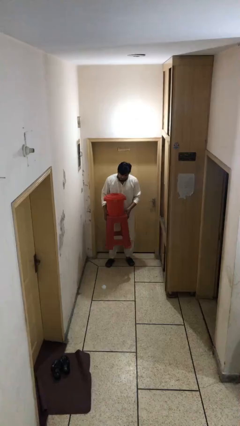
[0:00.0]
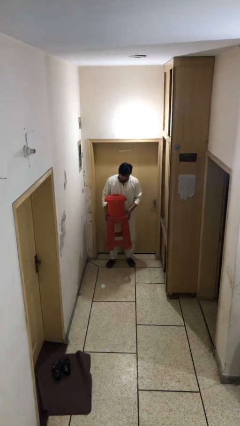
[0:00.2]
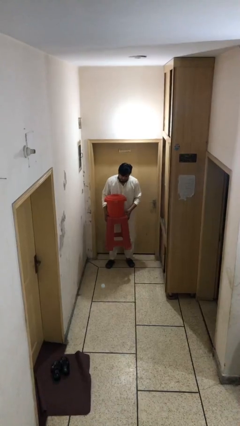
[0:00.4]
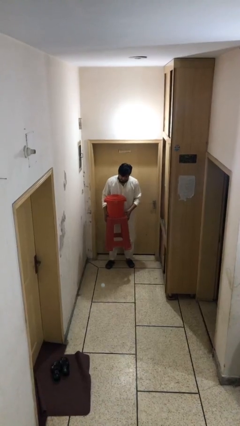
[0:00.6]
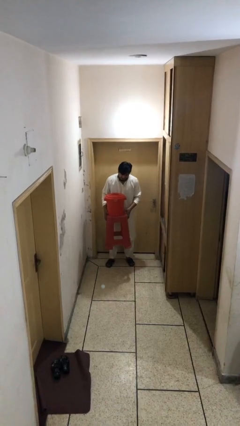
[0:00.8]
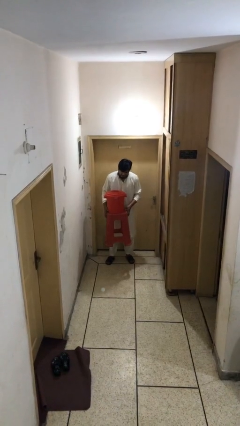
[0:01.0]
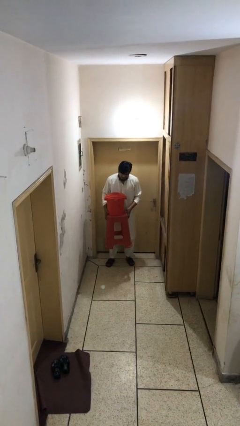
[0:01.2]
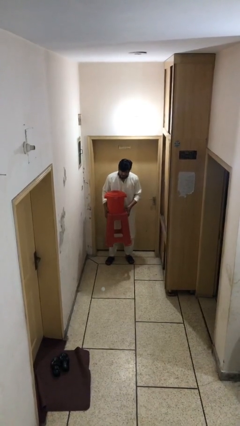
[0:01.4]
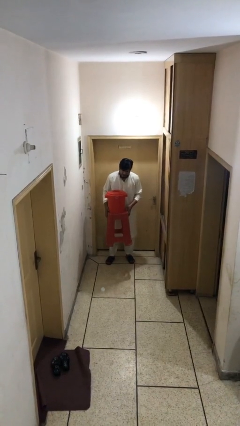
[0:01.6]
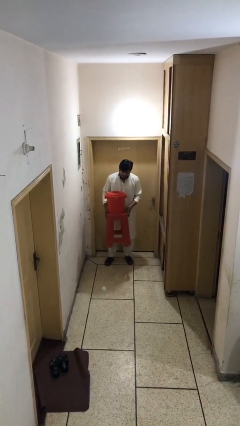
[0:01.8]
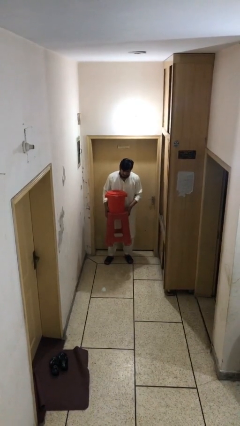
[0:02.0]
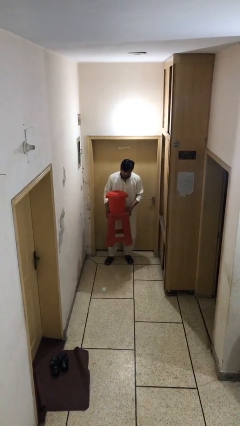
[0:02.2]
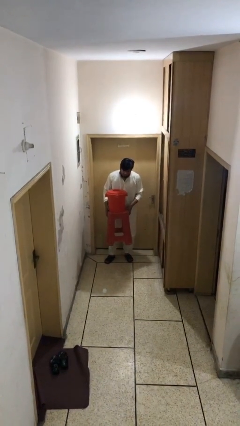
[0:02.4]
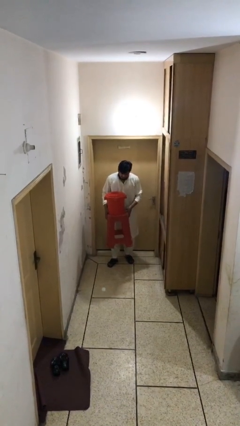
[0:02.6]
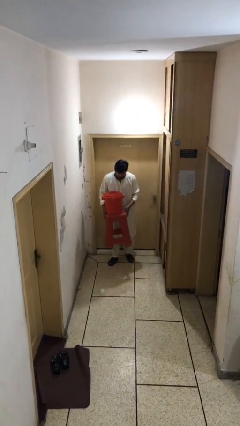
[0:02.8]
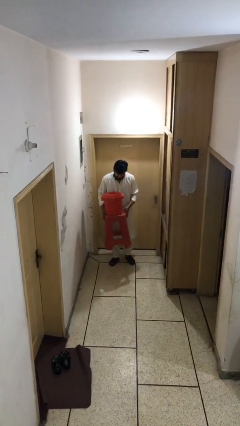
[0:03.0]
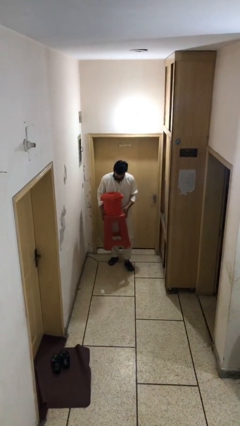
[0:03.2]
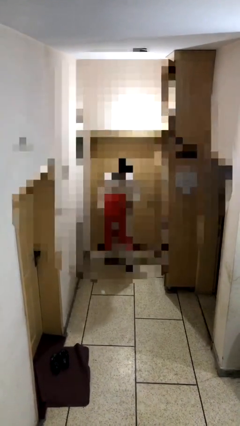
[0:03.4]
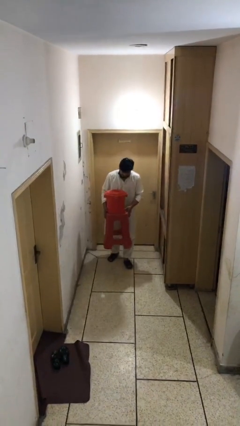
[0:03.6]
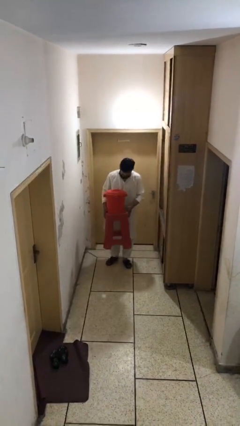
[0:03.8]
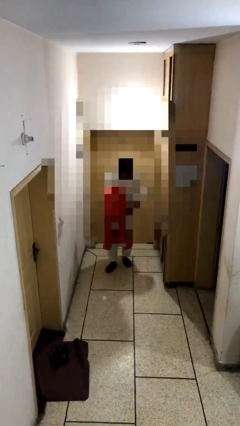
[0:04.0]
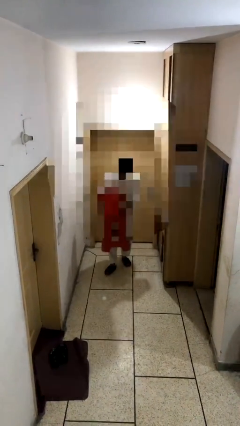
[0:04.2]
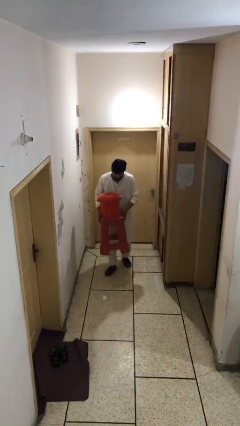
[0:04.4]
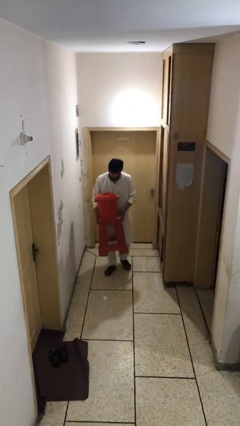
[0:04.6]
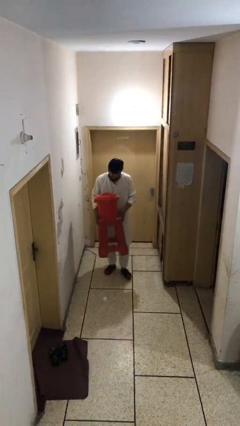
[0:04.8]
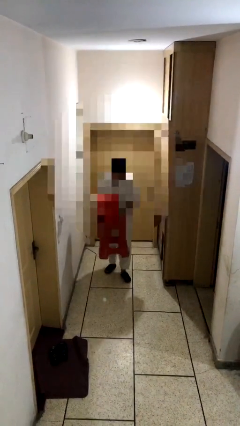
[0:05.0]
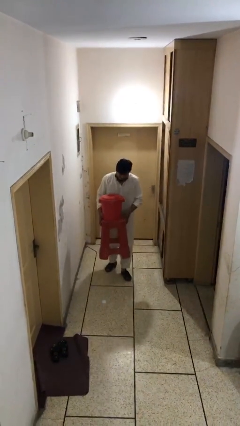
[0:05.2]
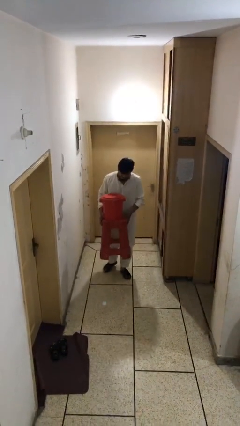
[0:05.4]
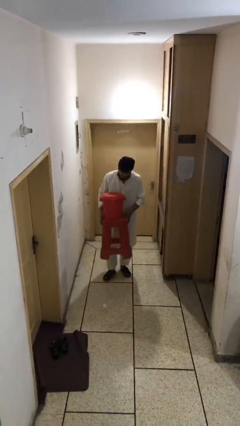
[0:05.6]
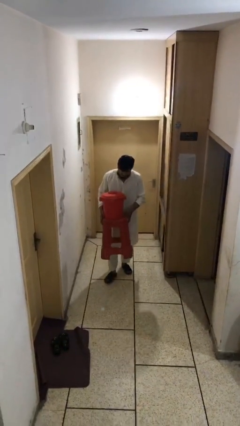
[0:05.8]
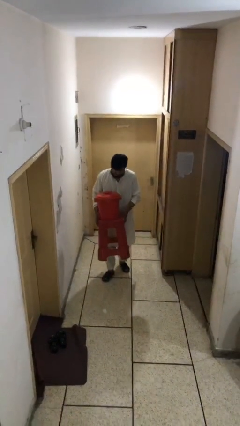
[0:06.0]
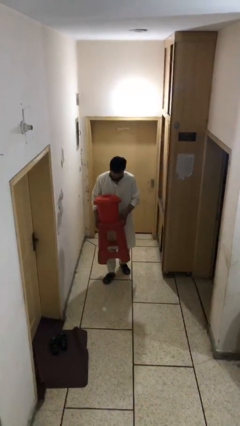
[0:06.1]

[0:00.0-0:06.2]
person carries heavy object

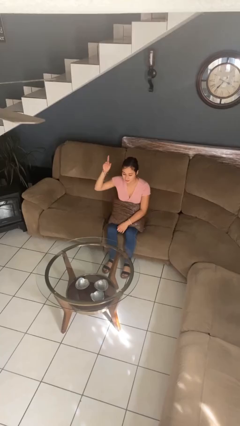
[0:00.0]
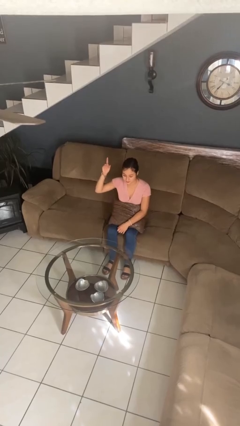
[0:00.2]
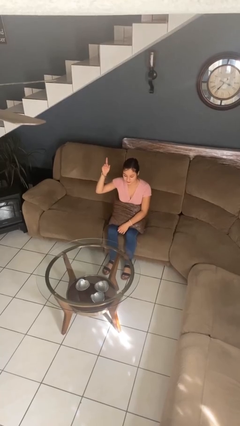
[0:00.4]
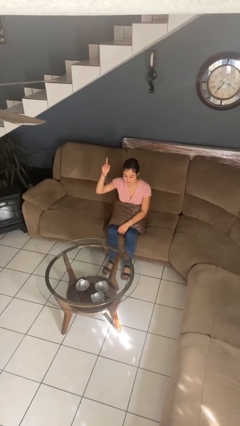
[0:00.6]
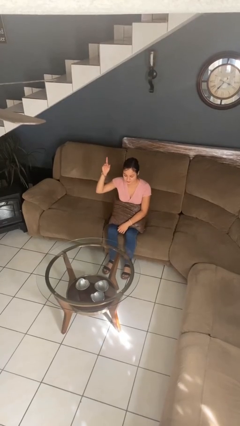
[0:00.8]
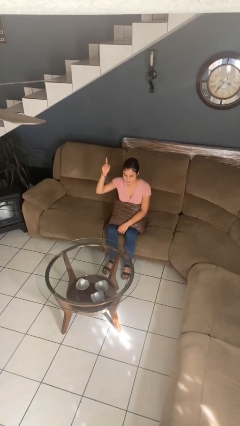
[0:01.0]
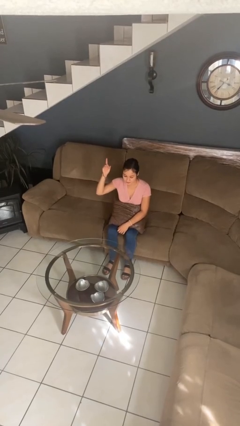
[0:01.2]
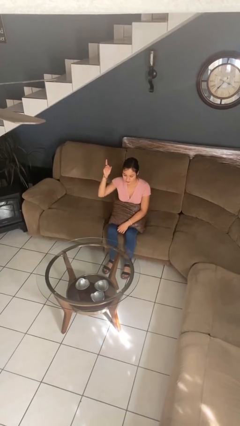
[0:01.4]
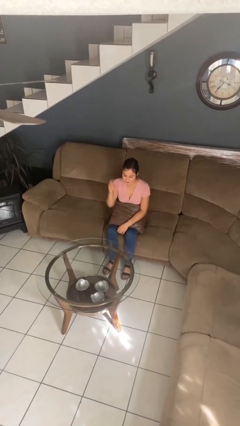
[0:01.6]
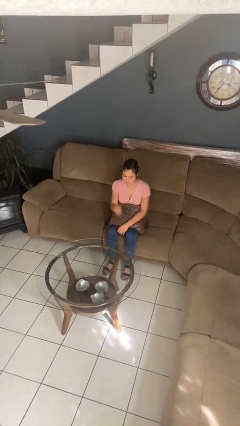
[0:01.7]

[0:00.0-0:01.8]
person gestures number one

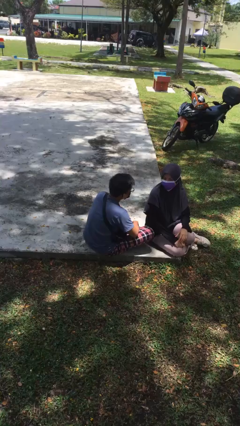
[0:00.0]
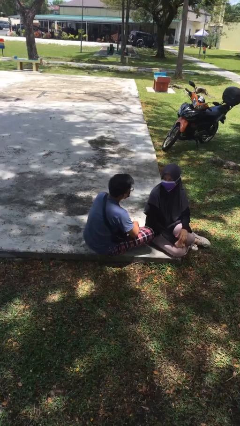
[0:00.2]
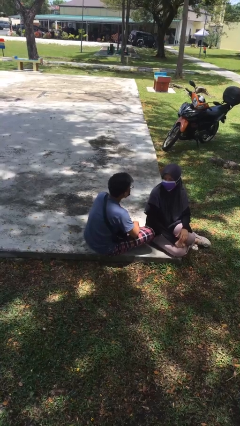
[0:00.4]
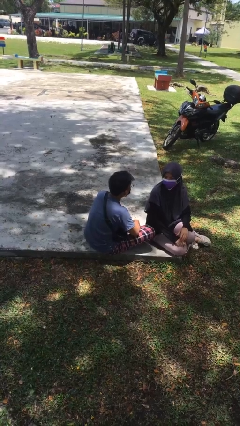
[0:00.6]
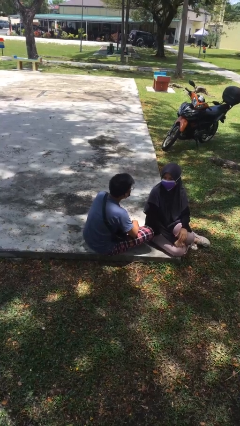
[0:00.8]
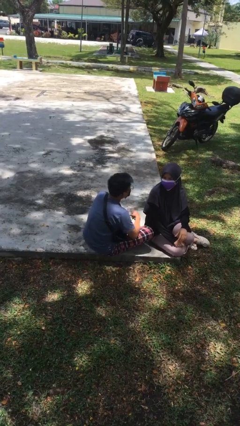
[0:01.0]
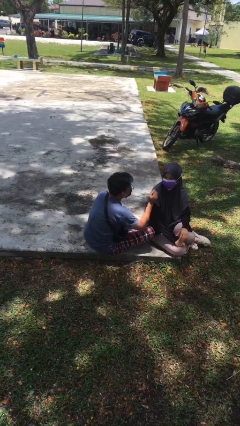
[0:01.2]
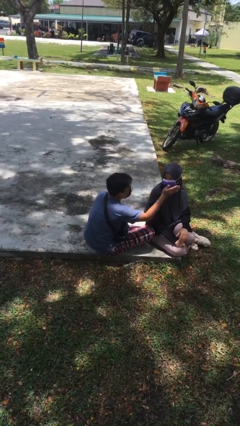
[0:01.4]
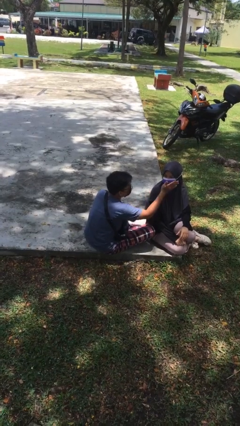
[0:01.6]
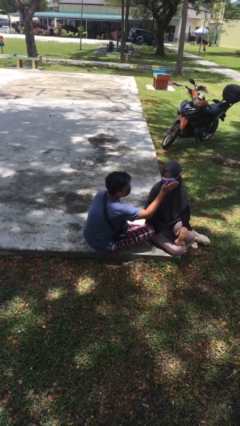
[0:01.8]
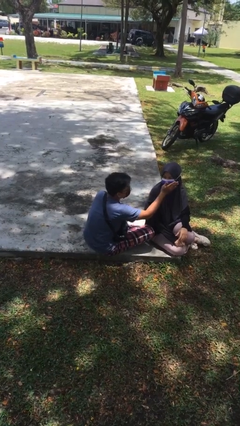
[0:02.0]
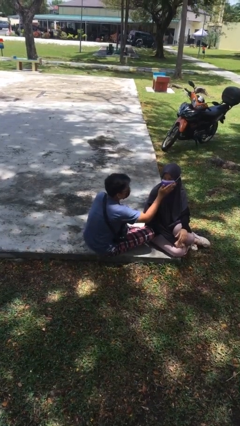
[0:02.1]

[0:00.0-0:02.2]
person touches face of person

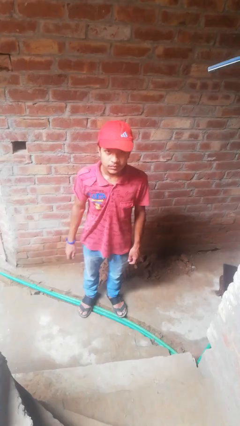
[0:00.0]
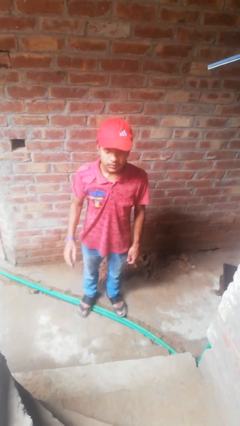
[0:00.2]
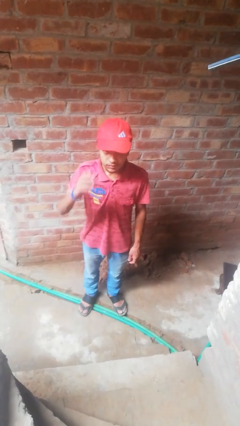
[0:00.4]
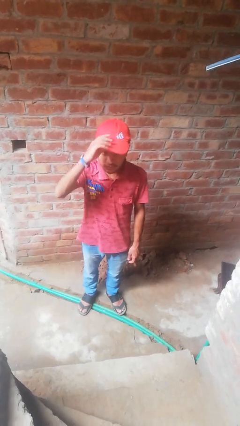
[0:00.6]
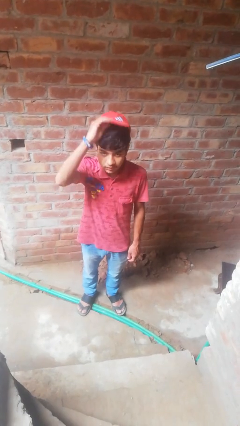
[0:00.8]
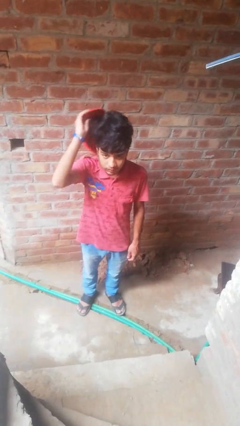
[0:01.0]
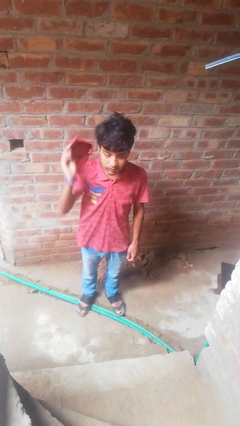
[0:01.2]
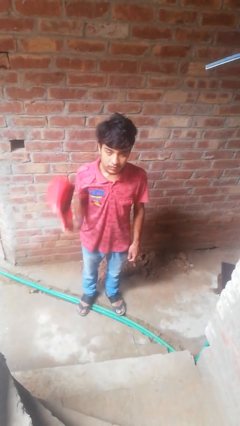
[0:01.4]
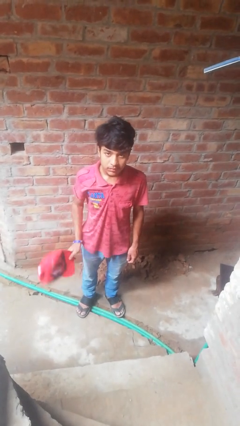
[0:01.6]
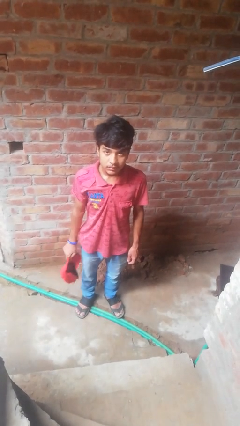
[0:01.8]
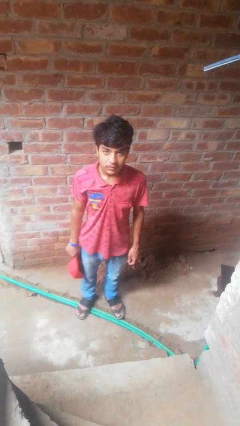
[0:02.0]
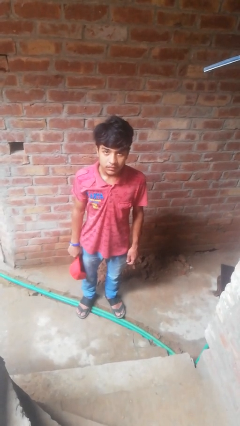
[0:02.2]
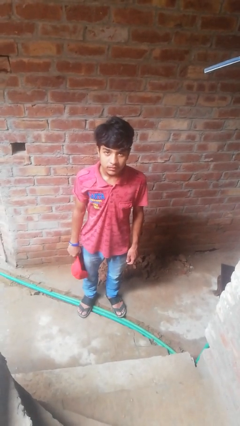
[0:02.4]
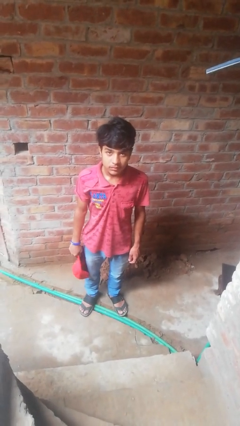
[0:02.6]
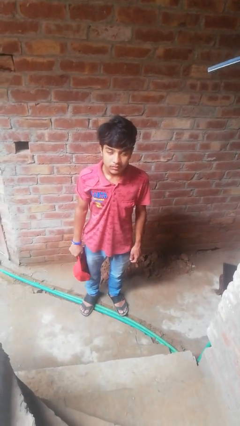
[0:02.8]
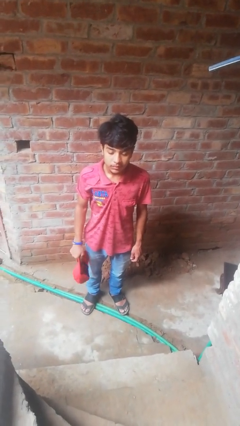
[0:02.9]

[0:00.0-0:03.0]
person takes off hat

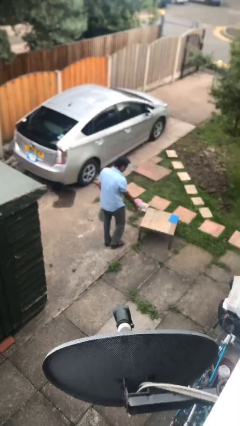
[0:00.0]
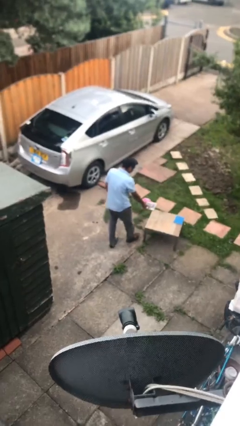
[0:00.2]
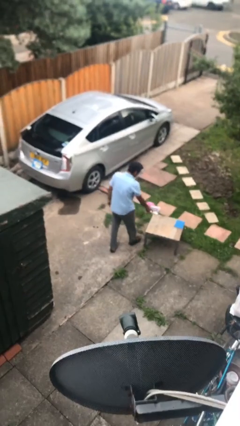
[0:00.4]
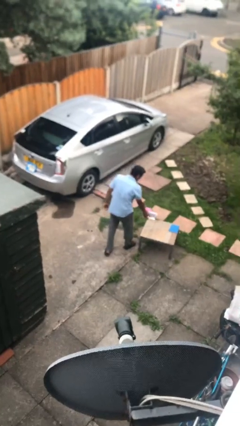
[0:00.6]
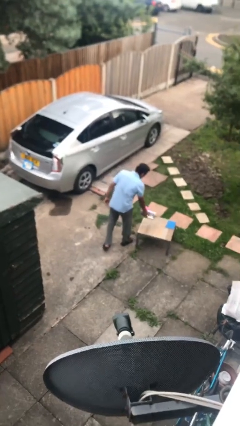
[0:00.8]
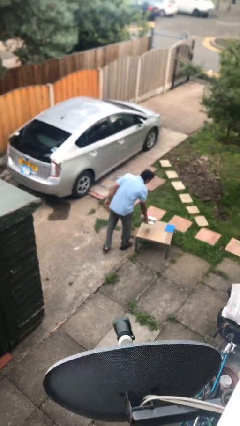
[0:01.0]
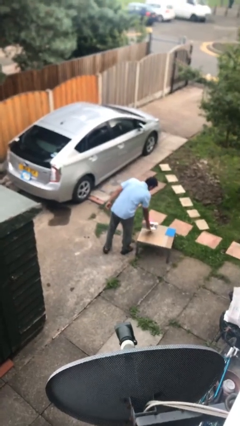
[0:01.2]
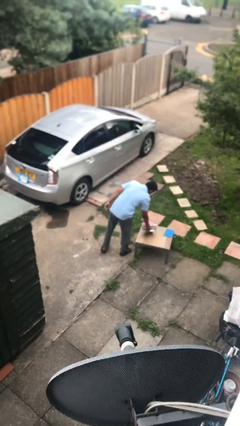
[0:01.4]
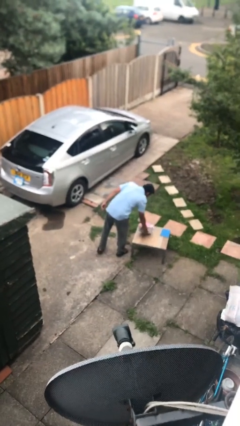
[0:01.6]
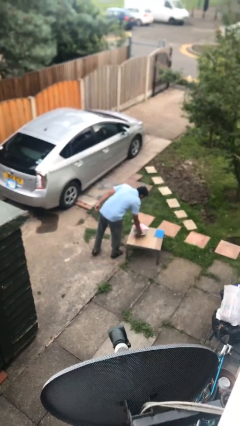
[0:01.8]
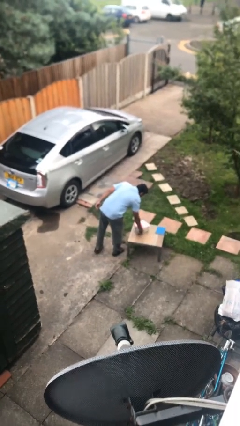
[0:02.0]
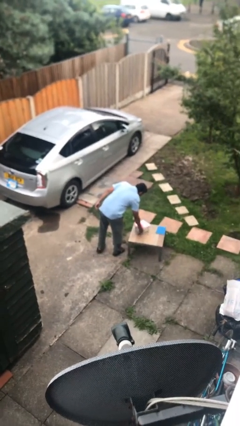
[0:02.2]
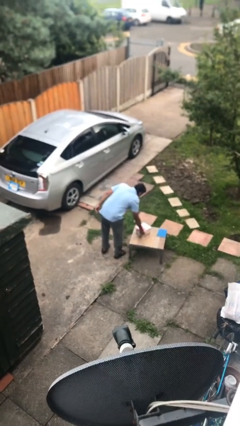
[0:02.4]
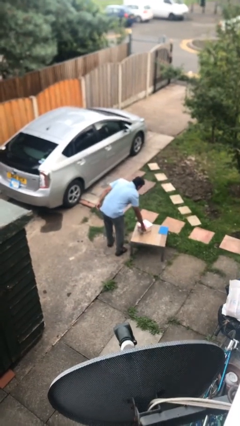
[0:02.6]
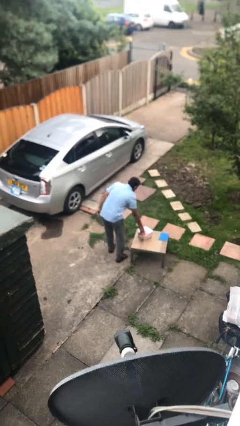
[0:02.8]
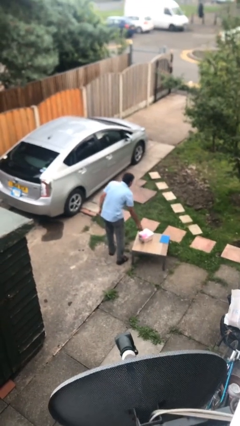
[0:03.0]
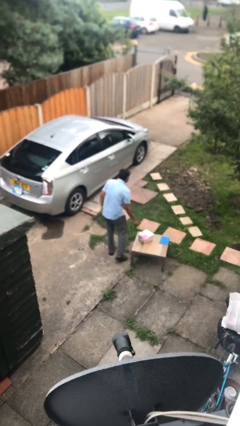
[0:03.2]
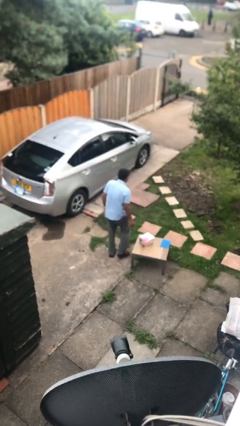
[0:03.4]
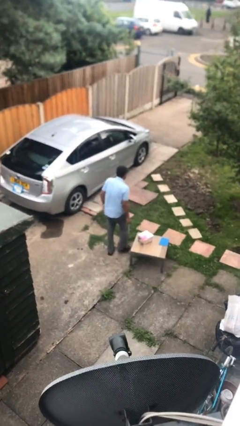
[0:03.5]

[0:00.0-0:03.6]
person puts down object on table

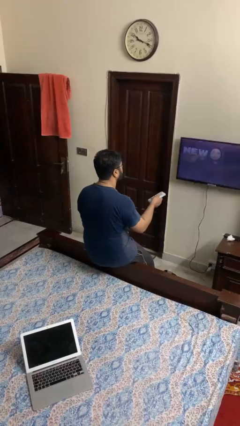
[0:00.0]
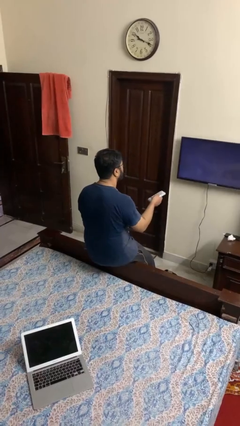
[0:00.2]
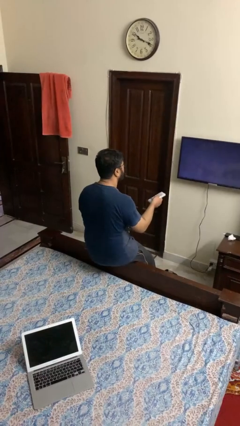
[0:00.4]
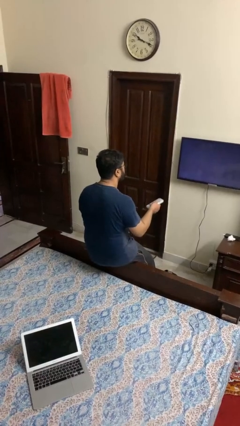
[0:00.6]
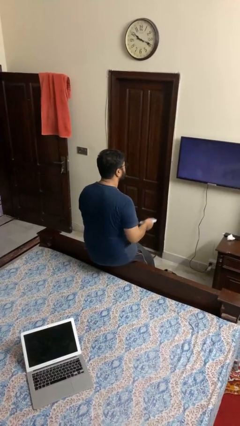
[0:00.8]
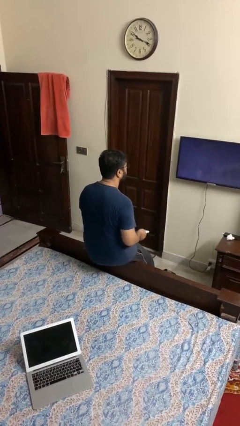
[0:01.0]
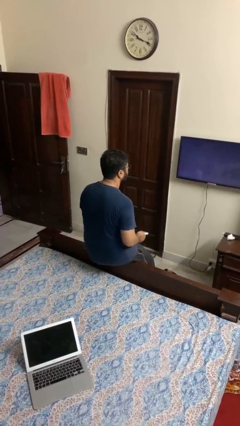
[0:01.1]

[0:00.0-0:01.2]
person uses television remote
